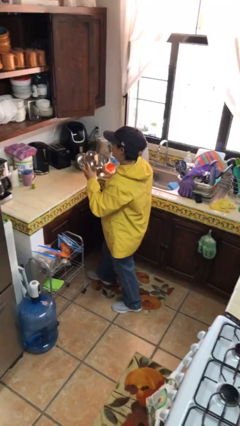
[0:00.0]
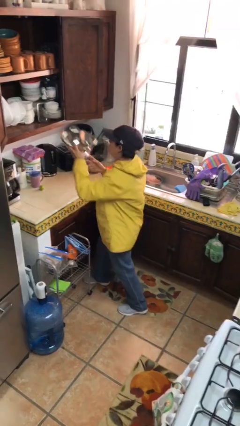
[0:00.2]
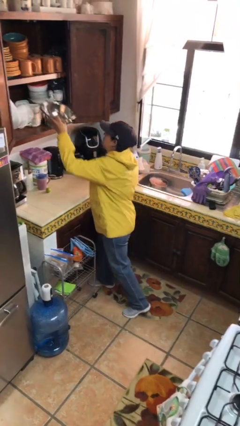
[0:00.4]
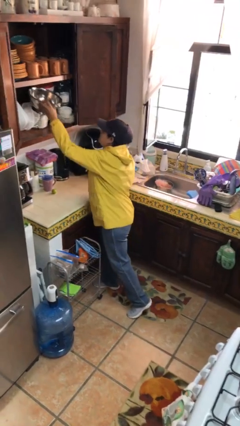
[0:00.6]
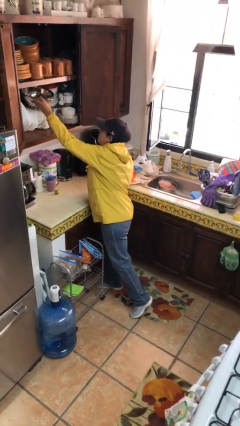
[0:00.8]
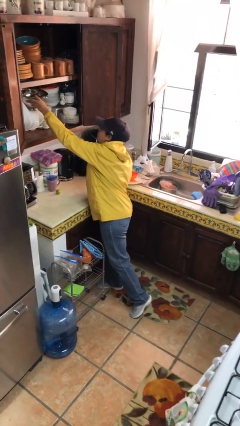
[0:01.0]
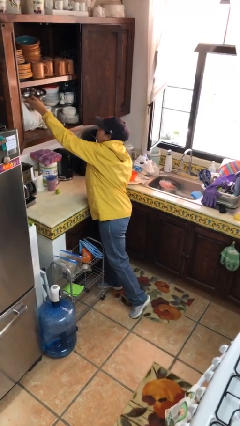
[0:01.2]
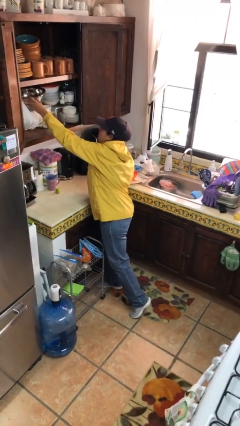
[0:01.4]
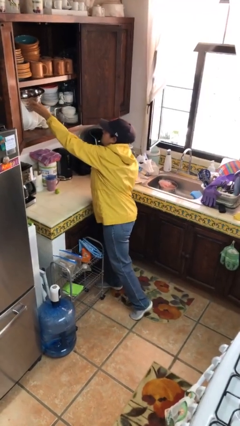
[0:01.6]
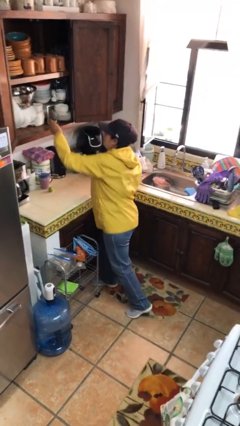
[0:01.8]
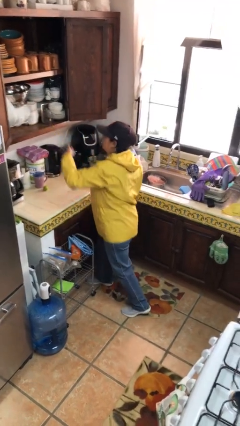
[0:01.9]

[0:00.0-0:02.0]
person puts down object into cabinet

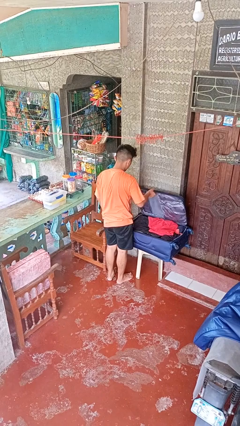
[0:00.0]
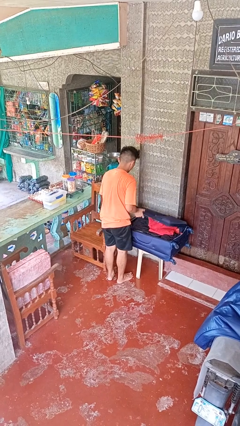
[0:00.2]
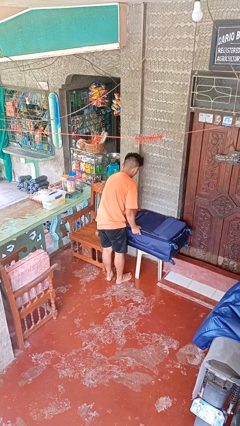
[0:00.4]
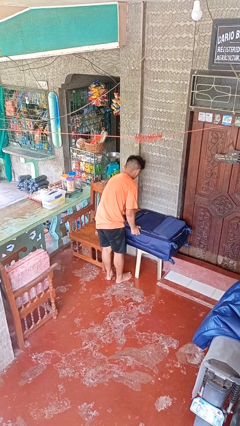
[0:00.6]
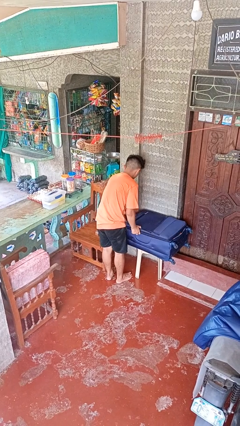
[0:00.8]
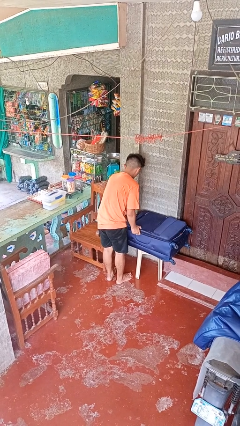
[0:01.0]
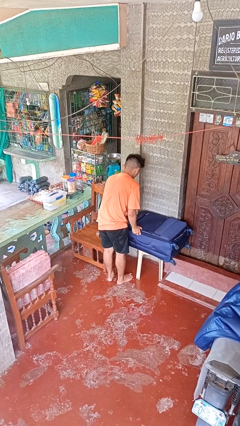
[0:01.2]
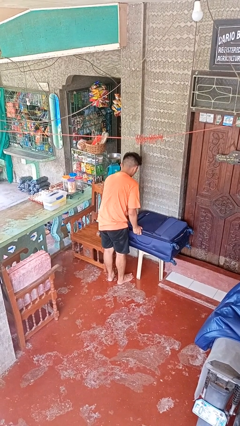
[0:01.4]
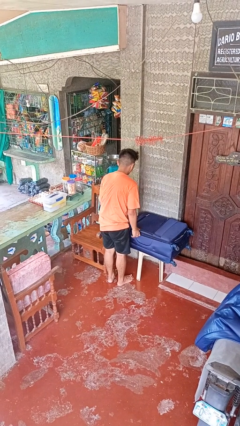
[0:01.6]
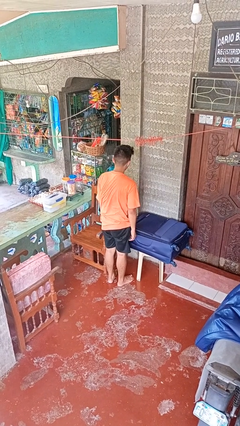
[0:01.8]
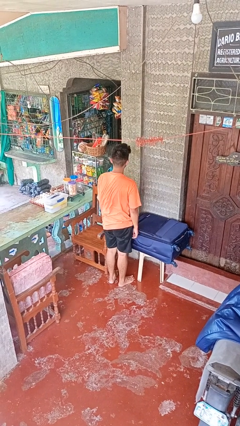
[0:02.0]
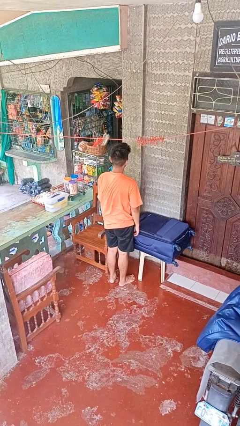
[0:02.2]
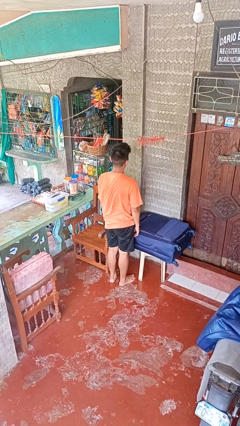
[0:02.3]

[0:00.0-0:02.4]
person closes suitcase

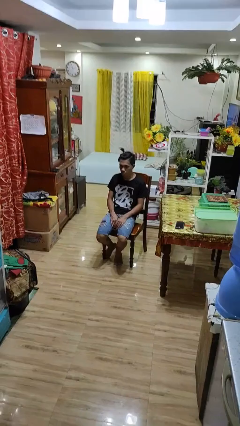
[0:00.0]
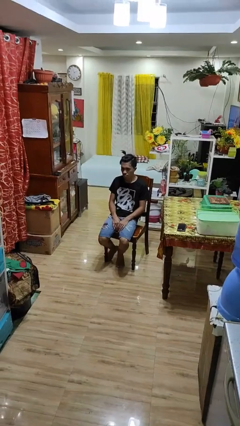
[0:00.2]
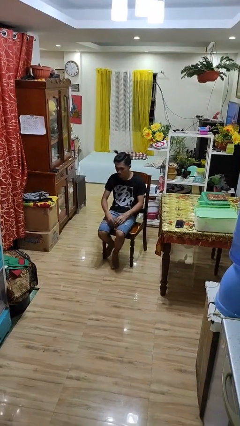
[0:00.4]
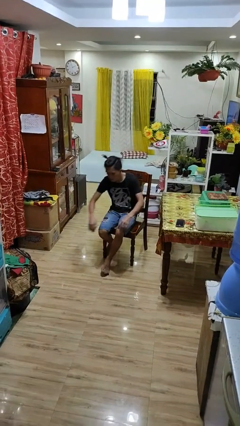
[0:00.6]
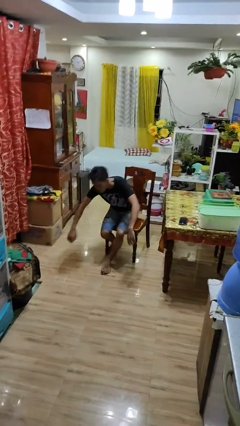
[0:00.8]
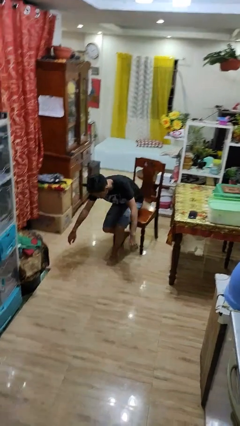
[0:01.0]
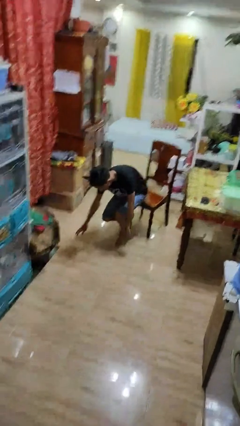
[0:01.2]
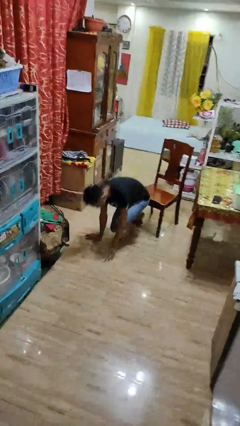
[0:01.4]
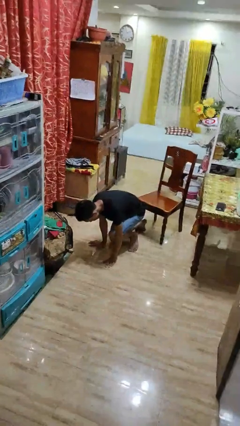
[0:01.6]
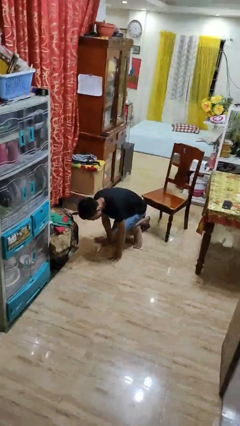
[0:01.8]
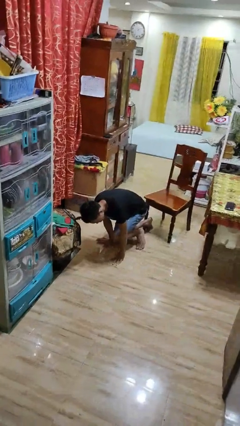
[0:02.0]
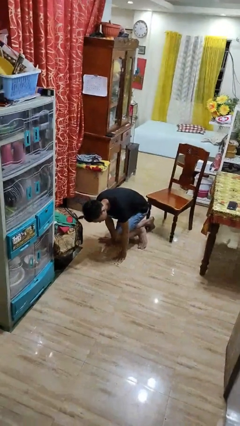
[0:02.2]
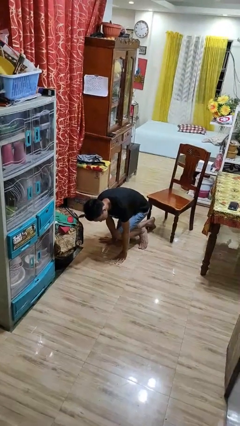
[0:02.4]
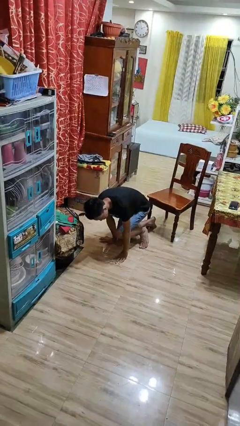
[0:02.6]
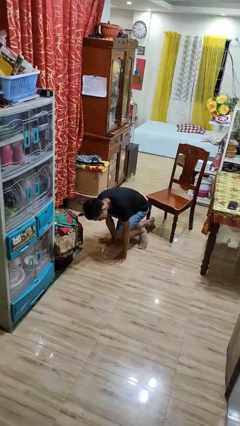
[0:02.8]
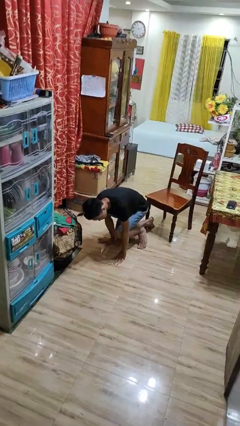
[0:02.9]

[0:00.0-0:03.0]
person falls from chair

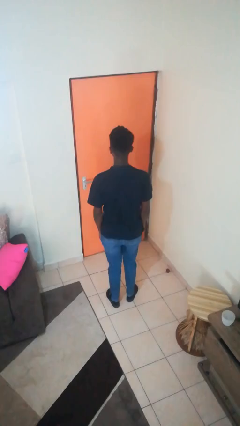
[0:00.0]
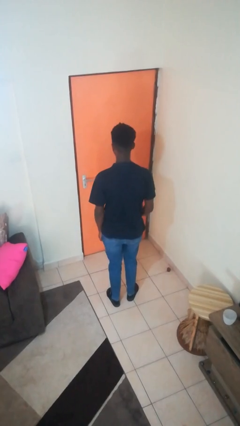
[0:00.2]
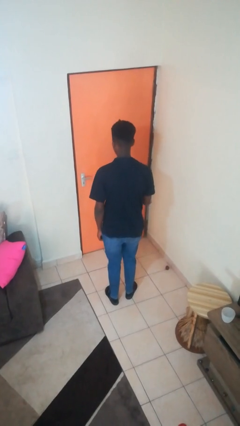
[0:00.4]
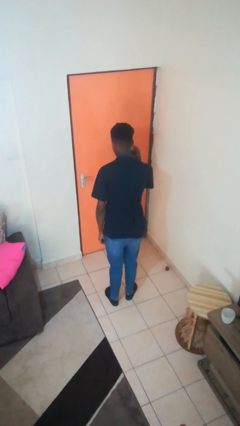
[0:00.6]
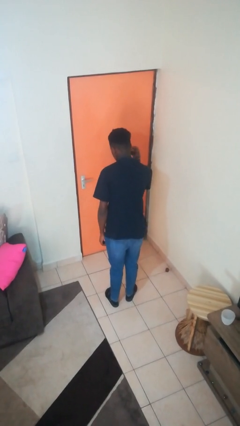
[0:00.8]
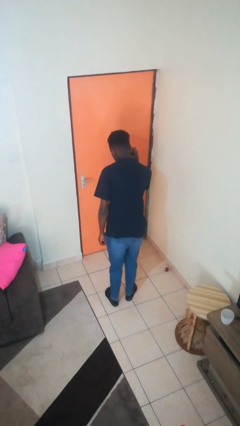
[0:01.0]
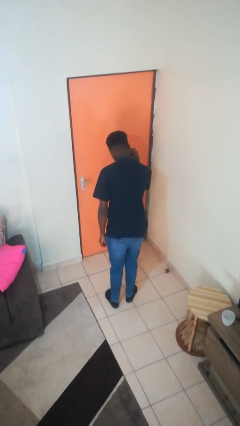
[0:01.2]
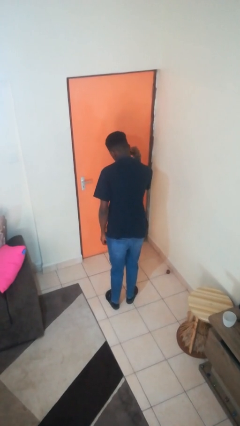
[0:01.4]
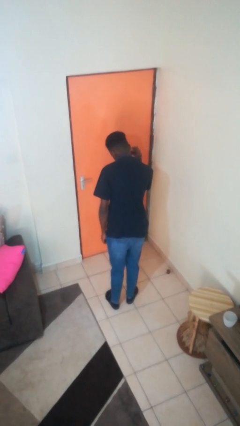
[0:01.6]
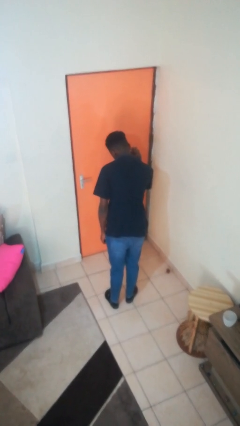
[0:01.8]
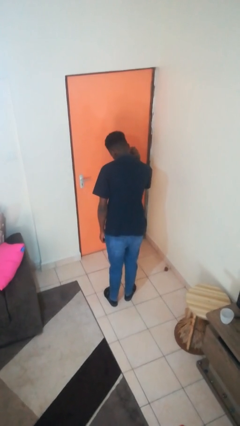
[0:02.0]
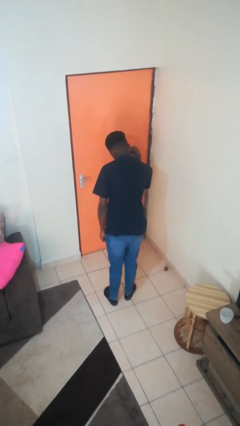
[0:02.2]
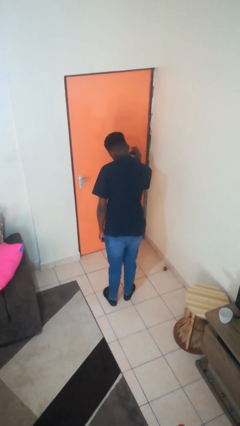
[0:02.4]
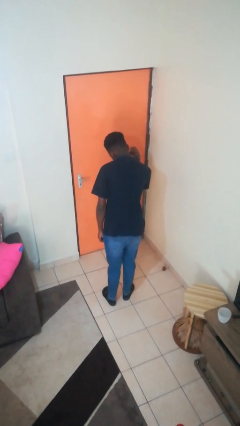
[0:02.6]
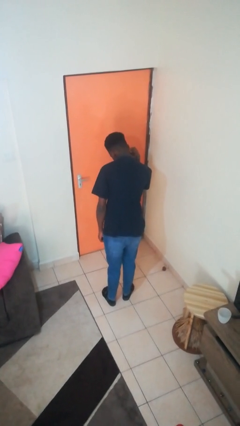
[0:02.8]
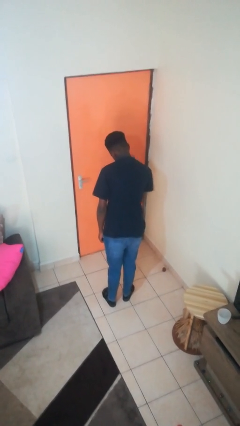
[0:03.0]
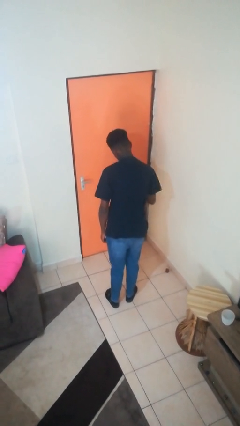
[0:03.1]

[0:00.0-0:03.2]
person gestures listen closely

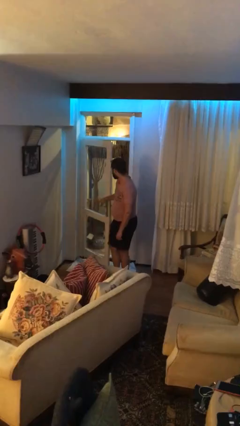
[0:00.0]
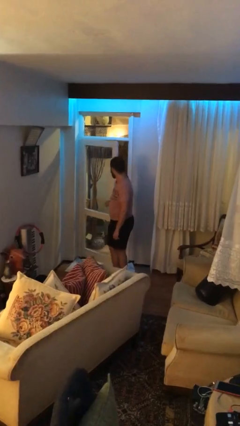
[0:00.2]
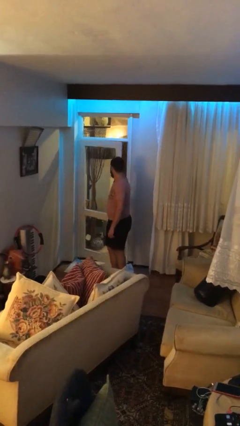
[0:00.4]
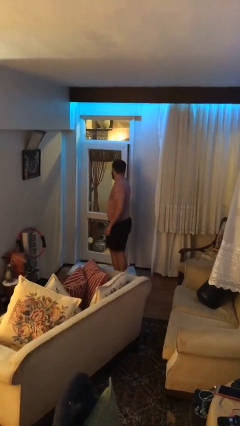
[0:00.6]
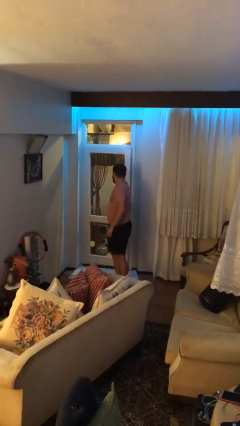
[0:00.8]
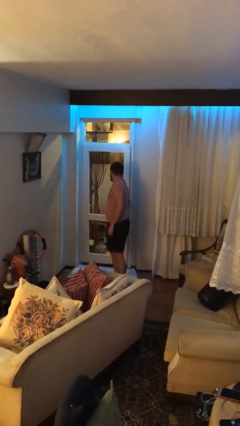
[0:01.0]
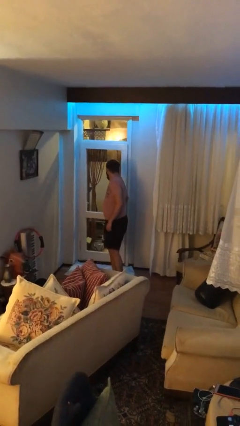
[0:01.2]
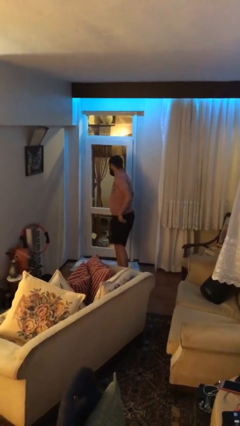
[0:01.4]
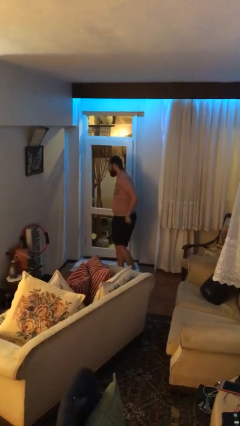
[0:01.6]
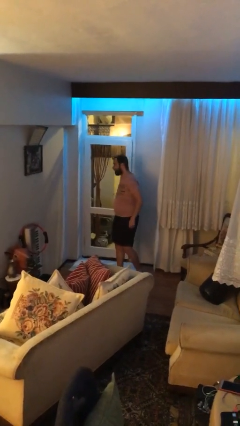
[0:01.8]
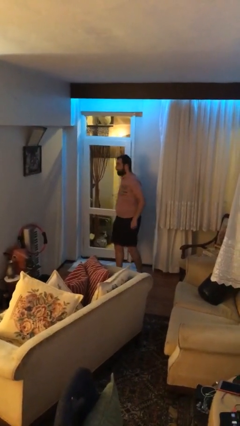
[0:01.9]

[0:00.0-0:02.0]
person closes facility door

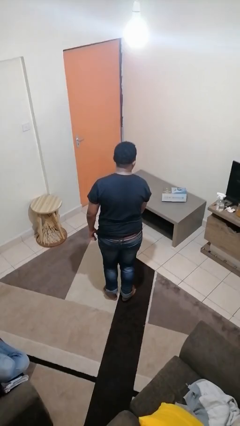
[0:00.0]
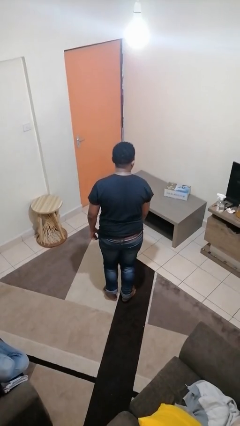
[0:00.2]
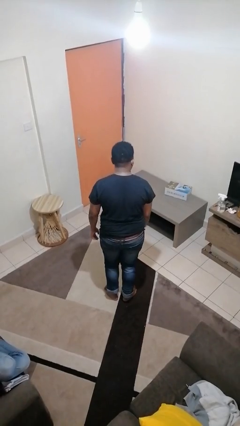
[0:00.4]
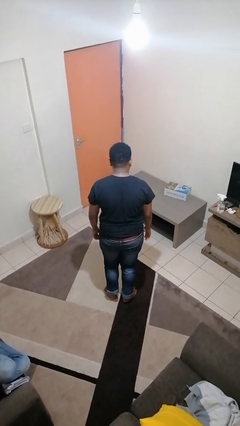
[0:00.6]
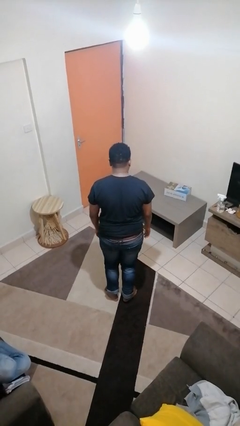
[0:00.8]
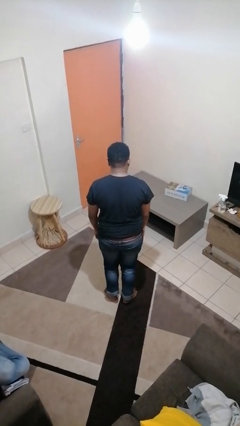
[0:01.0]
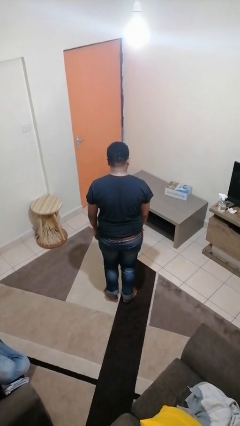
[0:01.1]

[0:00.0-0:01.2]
person throws object on table

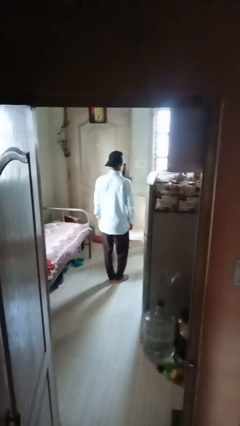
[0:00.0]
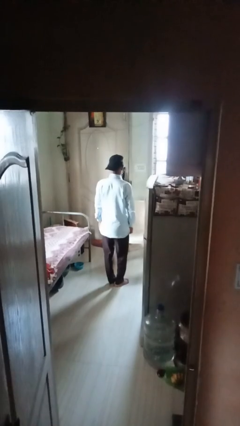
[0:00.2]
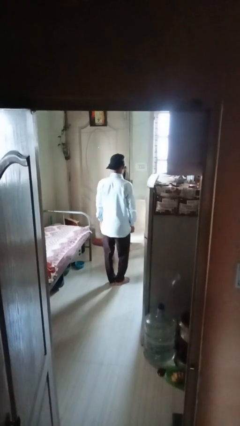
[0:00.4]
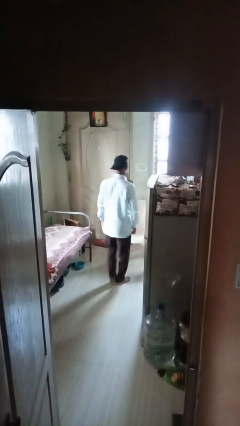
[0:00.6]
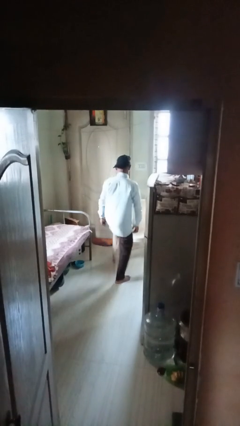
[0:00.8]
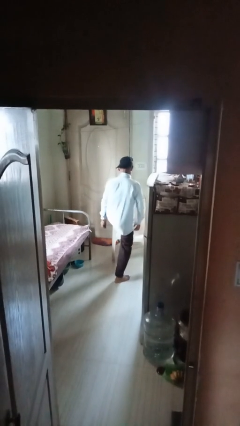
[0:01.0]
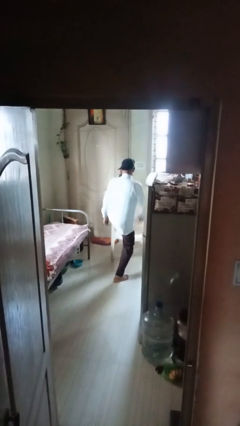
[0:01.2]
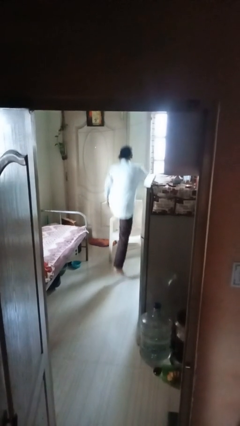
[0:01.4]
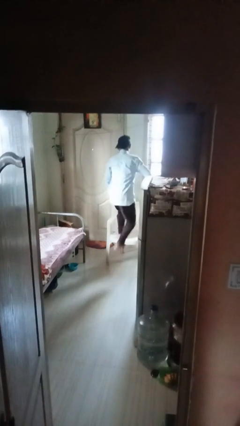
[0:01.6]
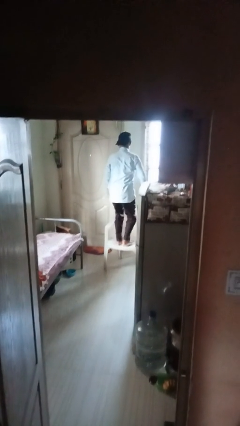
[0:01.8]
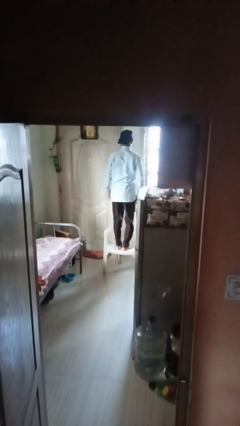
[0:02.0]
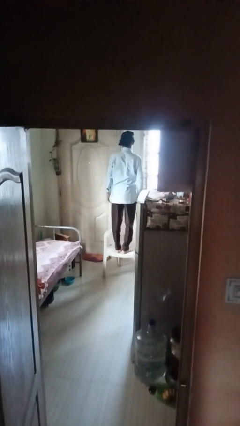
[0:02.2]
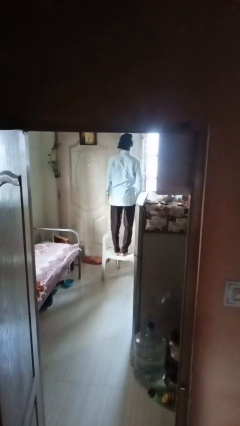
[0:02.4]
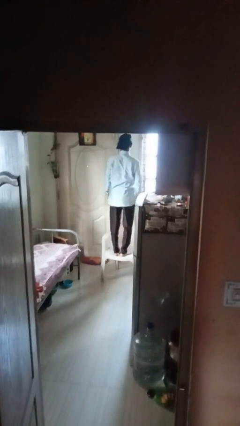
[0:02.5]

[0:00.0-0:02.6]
person climbs on chair

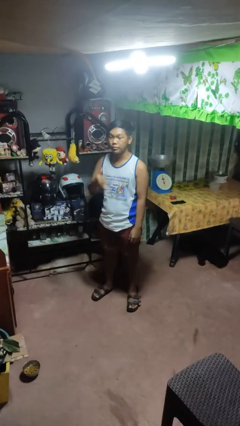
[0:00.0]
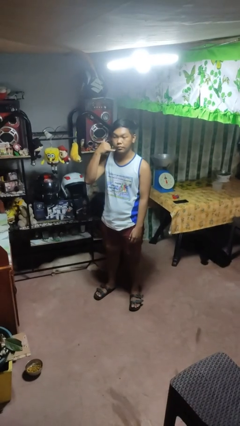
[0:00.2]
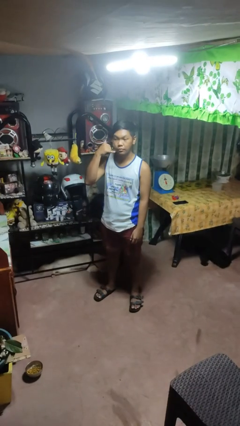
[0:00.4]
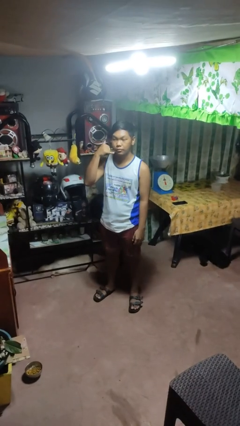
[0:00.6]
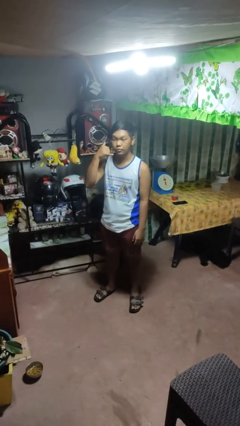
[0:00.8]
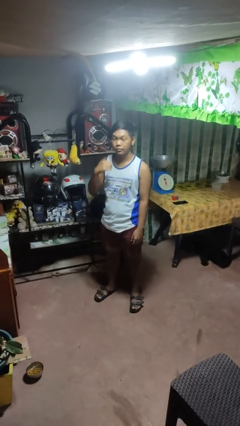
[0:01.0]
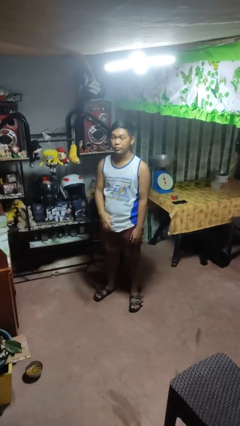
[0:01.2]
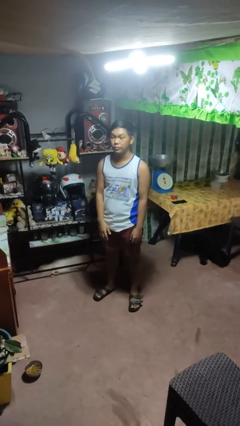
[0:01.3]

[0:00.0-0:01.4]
person gestures call me
